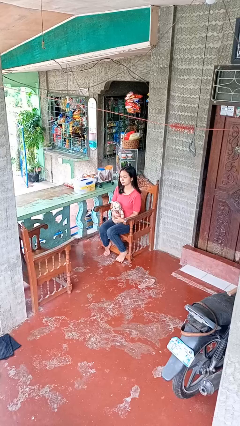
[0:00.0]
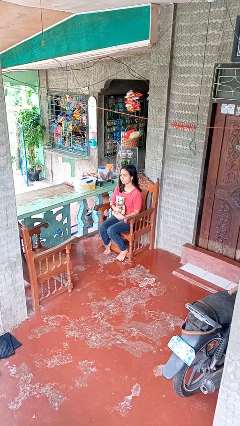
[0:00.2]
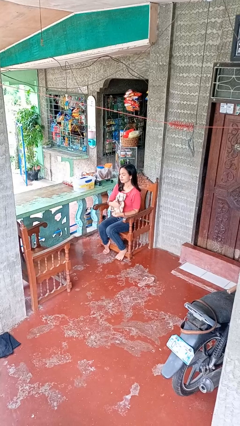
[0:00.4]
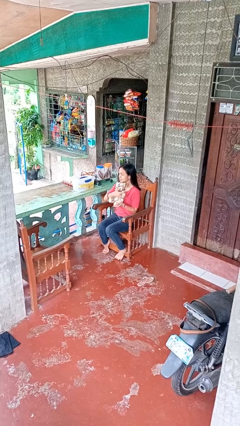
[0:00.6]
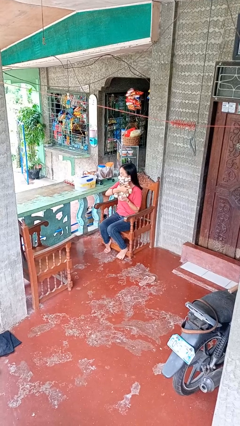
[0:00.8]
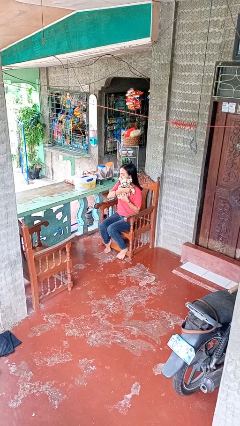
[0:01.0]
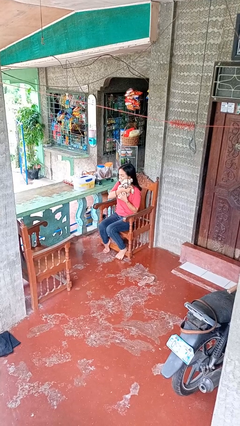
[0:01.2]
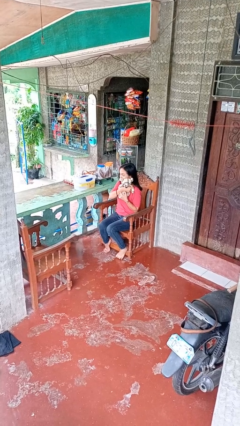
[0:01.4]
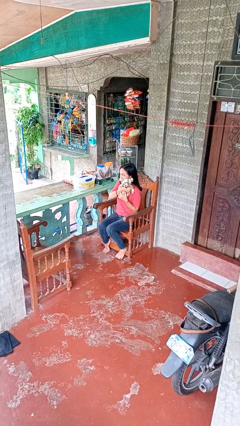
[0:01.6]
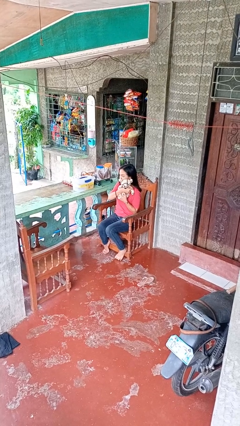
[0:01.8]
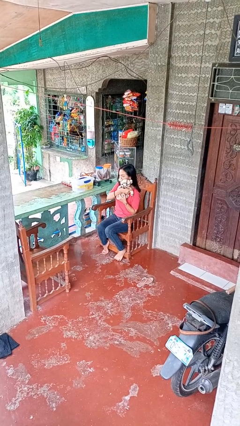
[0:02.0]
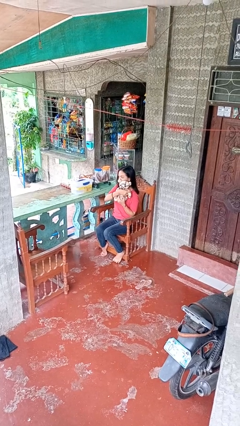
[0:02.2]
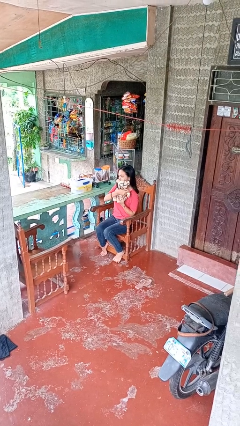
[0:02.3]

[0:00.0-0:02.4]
person hugs stuffed animal

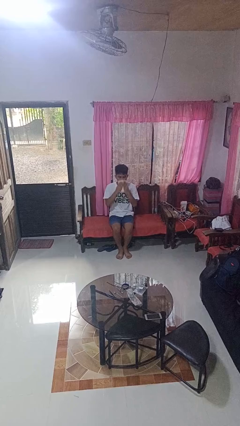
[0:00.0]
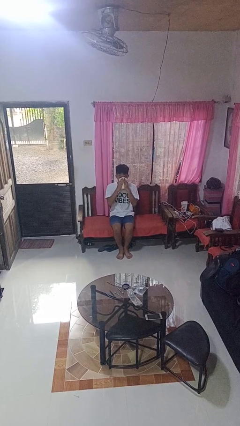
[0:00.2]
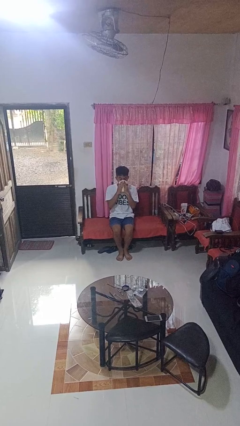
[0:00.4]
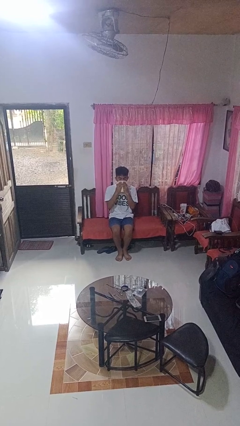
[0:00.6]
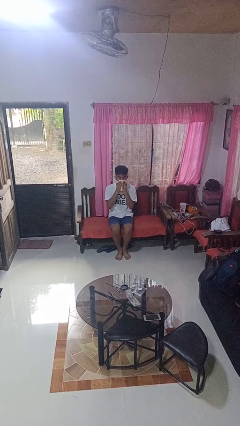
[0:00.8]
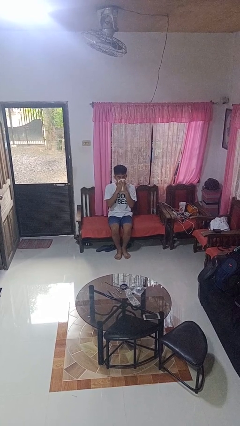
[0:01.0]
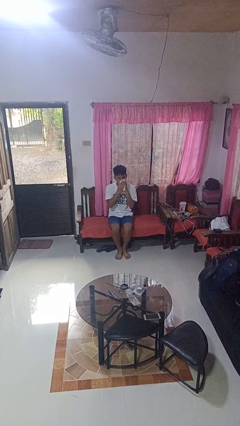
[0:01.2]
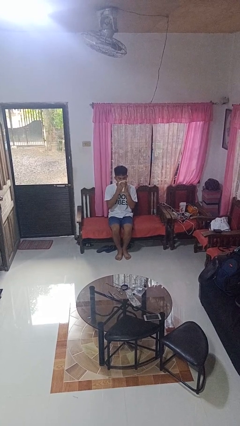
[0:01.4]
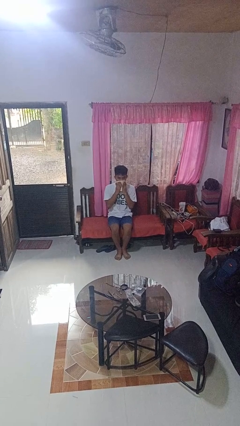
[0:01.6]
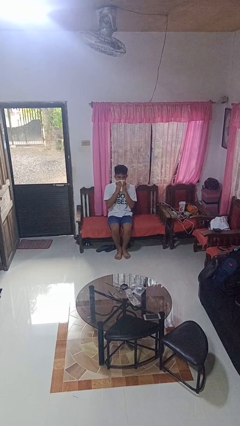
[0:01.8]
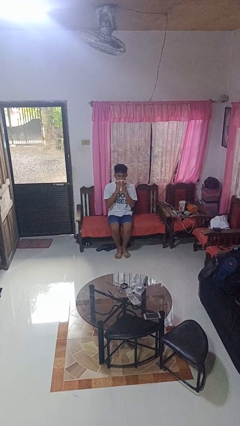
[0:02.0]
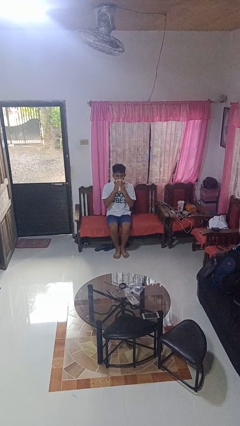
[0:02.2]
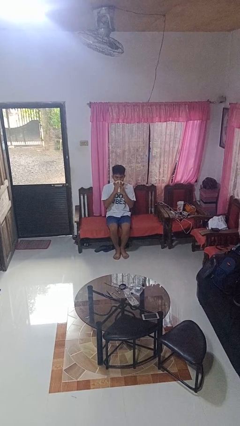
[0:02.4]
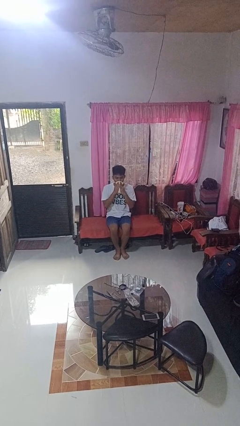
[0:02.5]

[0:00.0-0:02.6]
person wipes mouth with napkin

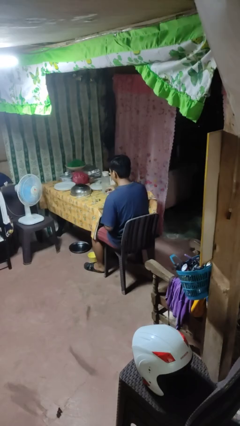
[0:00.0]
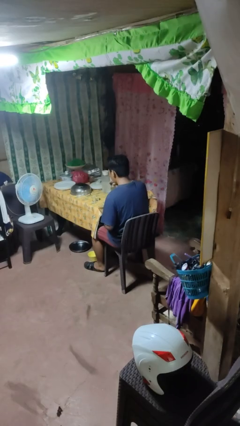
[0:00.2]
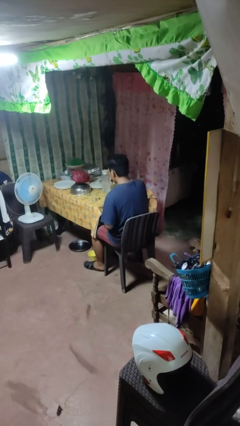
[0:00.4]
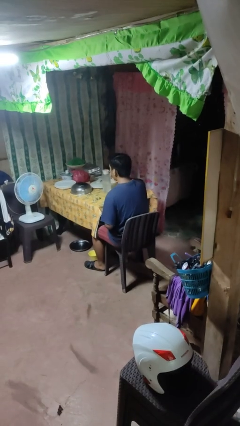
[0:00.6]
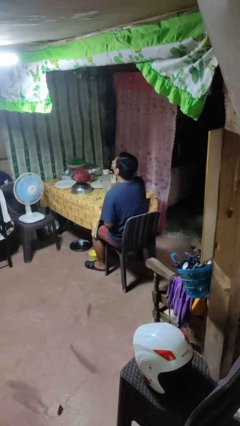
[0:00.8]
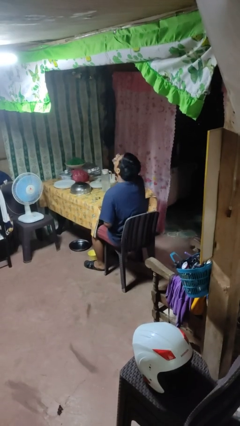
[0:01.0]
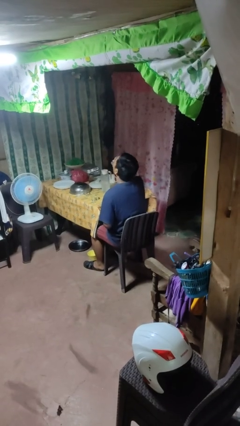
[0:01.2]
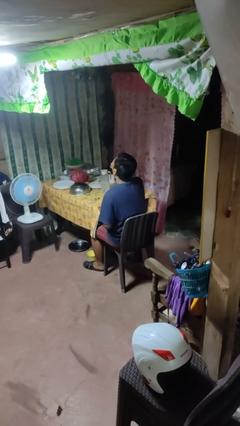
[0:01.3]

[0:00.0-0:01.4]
person drinks from shotglass

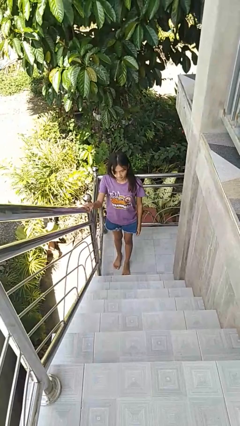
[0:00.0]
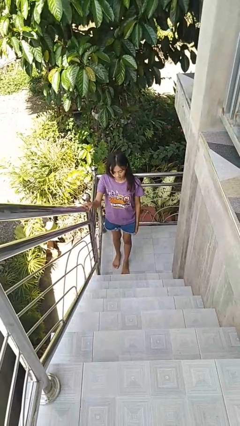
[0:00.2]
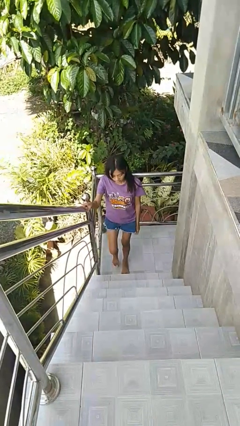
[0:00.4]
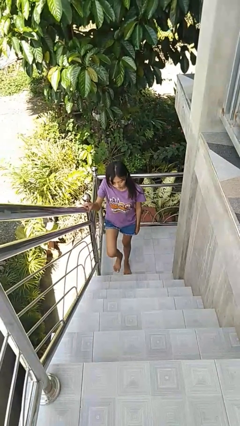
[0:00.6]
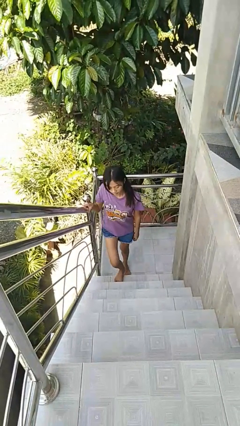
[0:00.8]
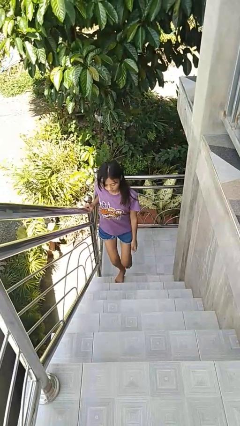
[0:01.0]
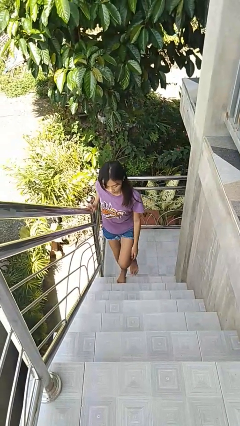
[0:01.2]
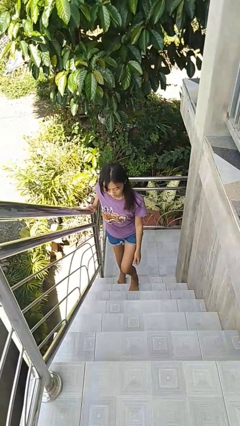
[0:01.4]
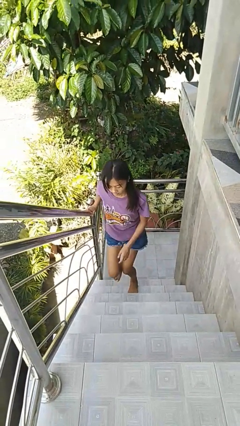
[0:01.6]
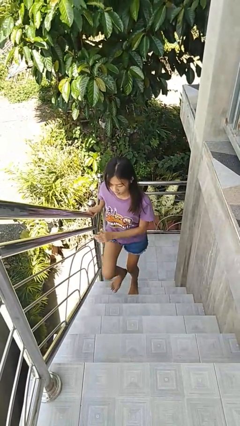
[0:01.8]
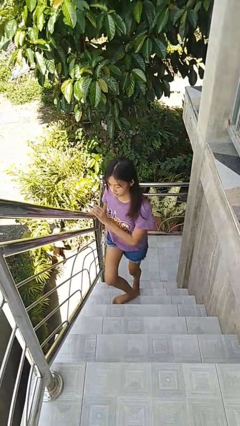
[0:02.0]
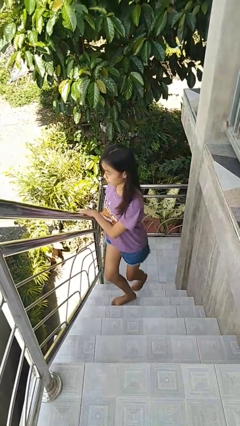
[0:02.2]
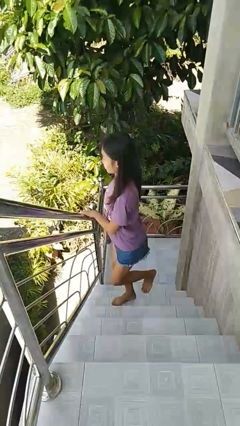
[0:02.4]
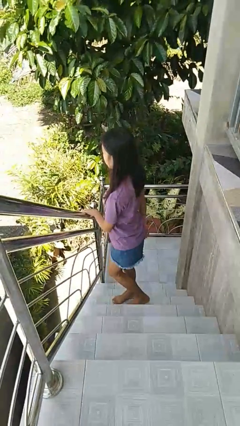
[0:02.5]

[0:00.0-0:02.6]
person climbs up stairs

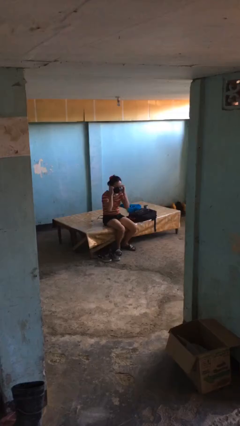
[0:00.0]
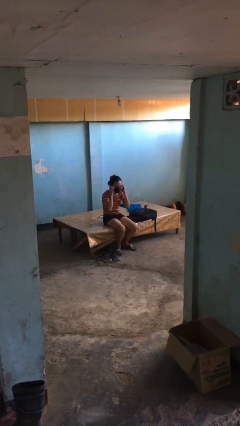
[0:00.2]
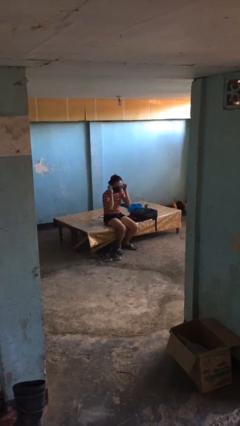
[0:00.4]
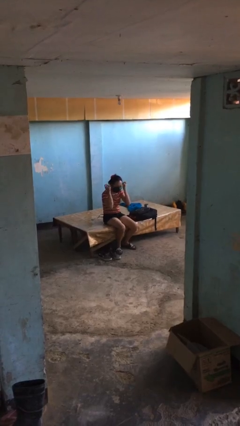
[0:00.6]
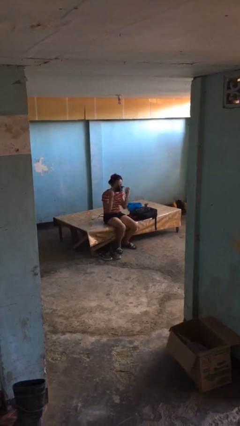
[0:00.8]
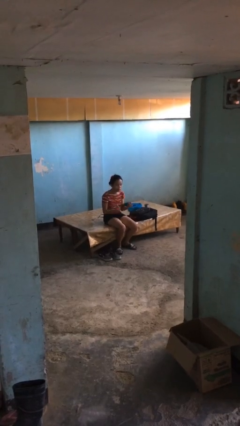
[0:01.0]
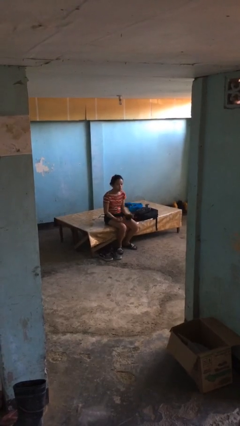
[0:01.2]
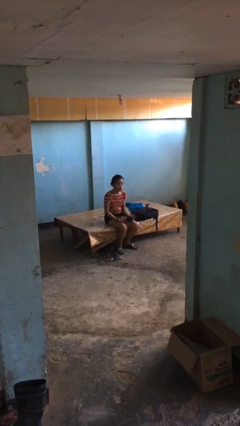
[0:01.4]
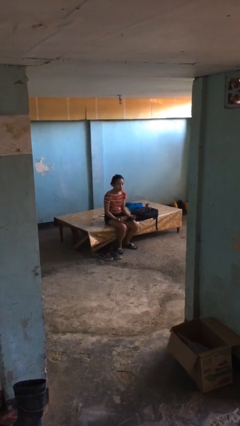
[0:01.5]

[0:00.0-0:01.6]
person takes off facemask

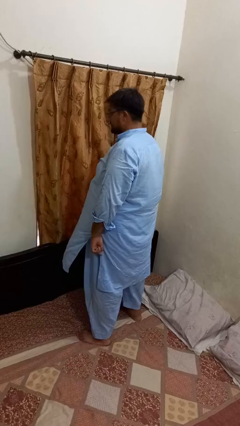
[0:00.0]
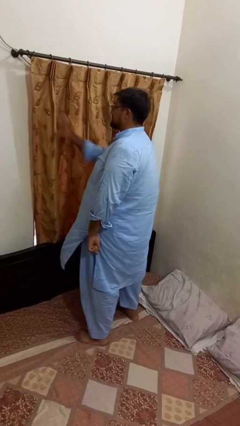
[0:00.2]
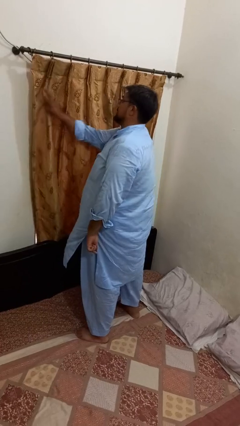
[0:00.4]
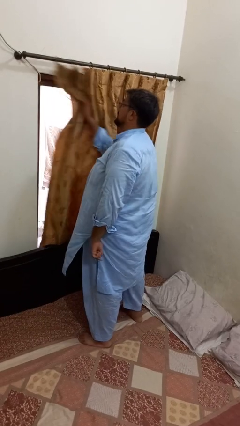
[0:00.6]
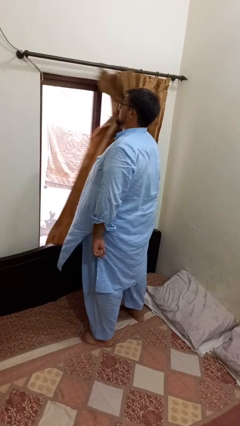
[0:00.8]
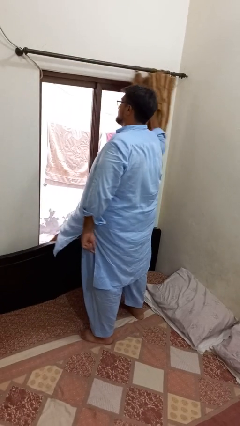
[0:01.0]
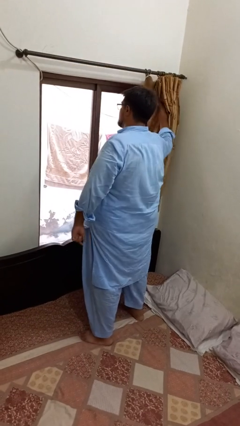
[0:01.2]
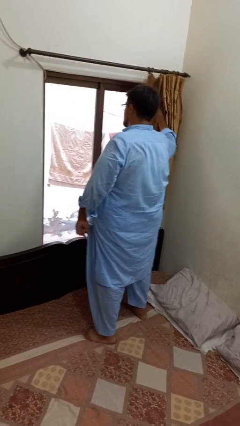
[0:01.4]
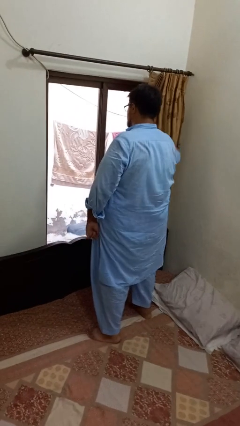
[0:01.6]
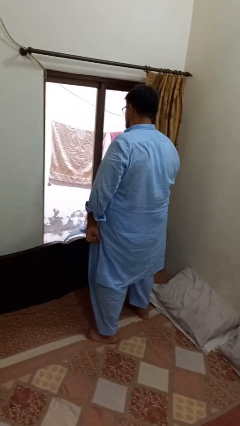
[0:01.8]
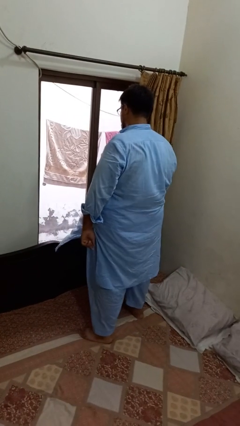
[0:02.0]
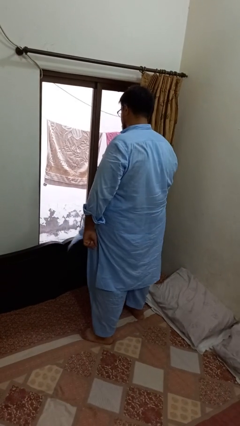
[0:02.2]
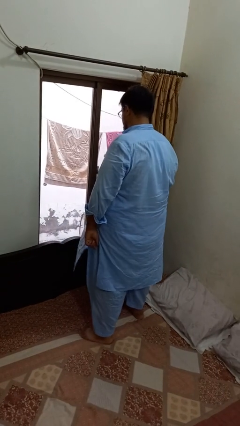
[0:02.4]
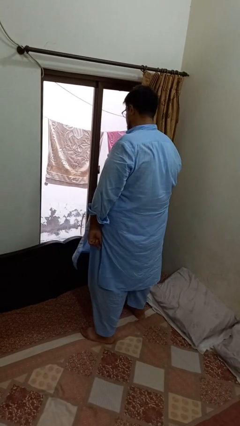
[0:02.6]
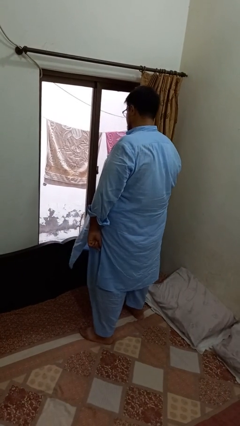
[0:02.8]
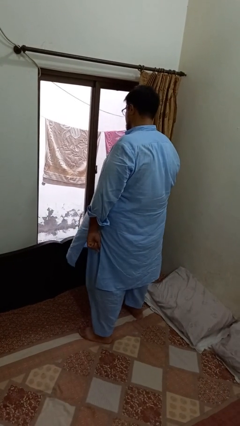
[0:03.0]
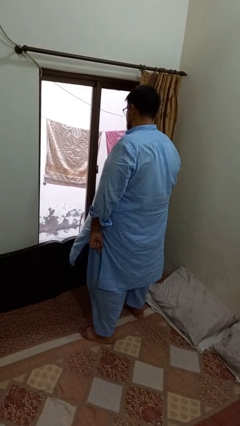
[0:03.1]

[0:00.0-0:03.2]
person opens curtains

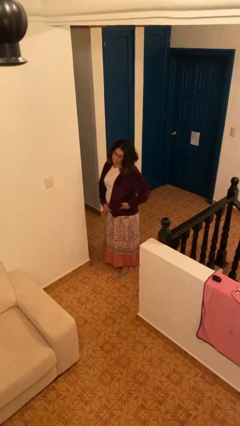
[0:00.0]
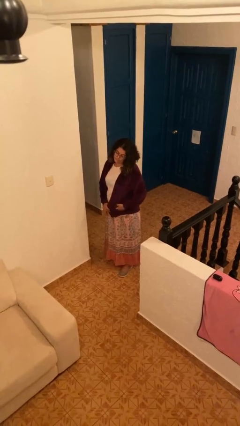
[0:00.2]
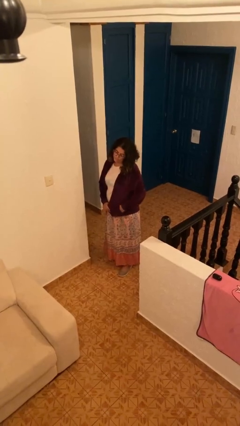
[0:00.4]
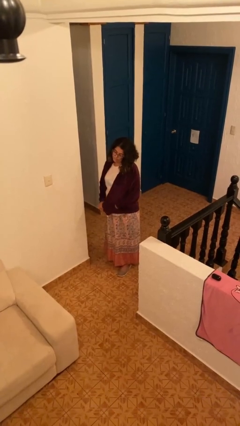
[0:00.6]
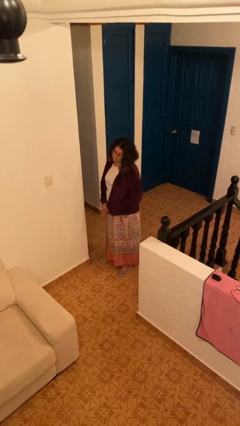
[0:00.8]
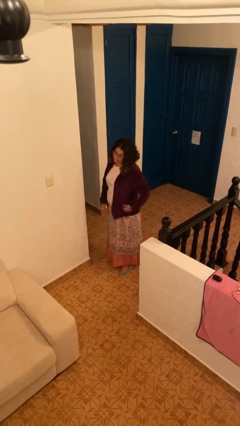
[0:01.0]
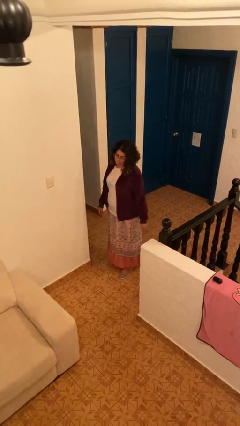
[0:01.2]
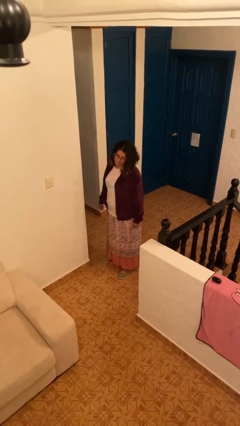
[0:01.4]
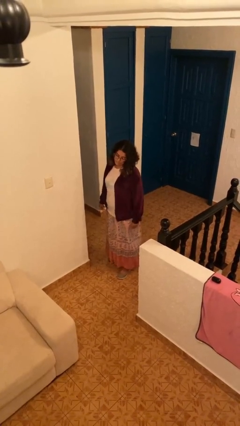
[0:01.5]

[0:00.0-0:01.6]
person puts phone into pocket

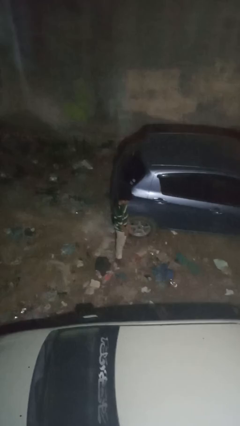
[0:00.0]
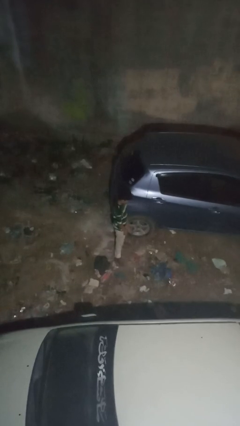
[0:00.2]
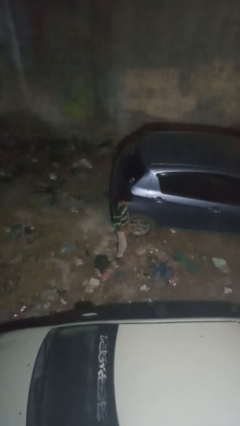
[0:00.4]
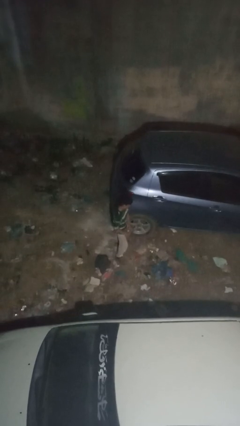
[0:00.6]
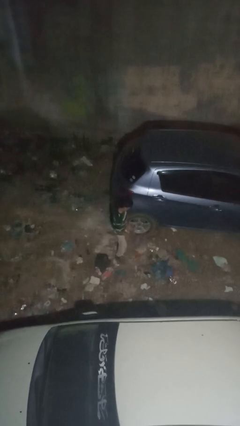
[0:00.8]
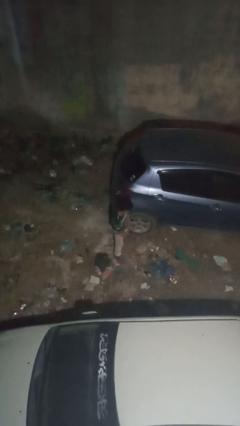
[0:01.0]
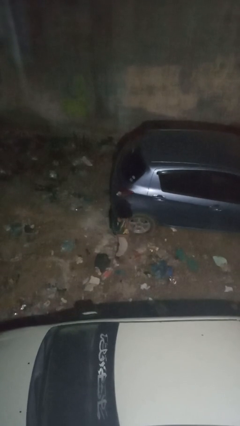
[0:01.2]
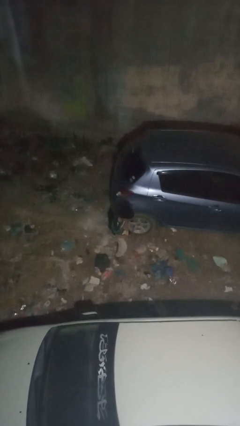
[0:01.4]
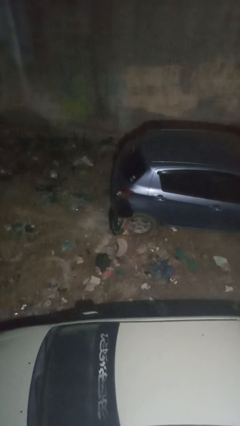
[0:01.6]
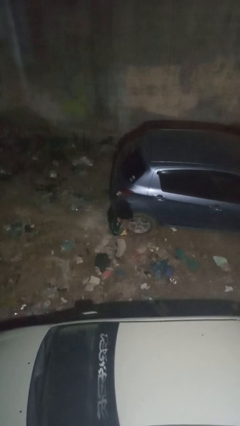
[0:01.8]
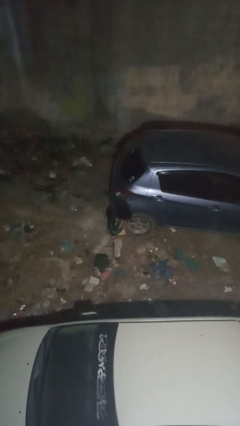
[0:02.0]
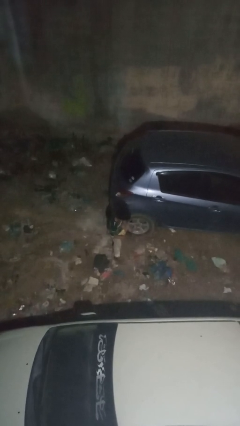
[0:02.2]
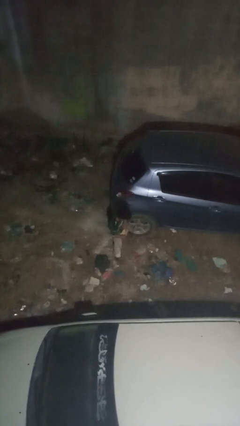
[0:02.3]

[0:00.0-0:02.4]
person kicks car tires
